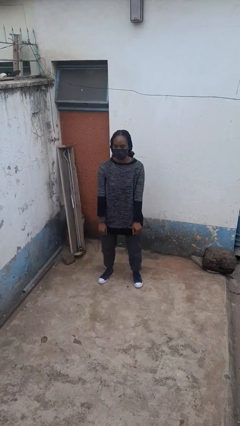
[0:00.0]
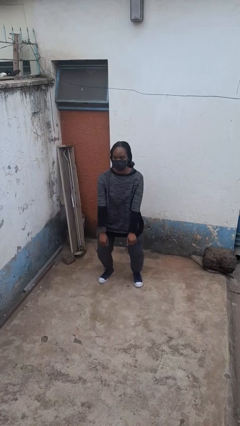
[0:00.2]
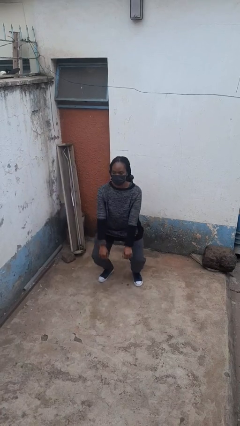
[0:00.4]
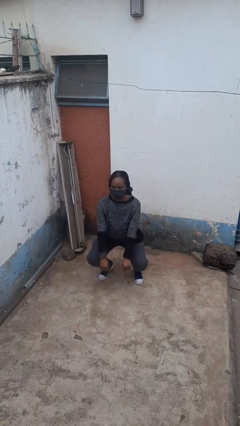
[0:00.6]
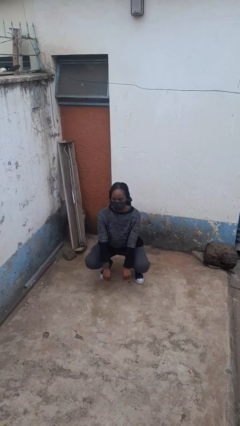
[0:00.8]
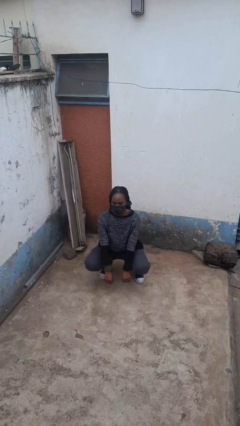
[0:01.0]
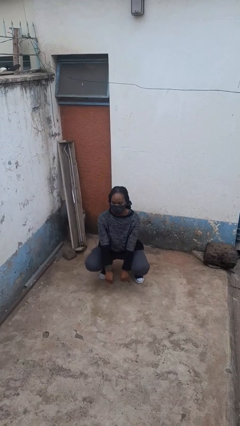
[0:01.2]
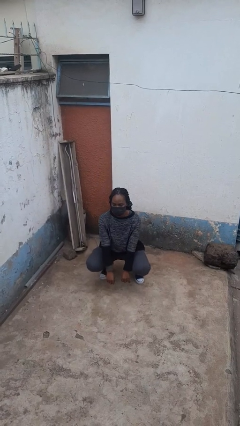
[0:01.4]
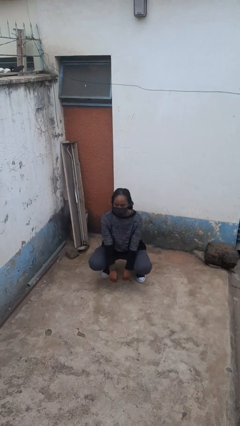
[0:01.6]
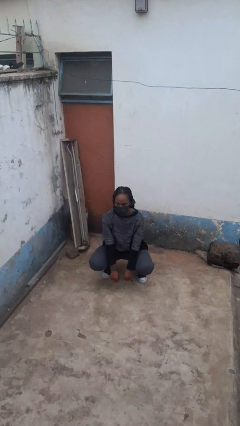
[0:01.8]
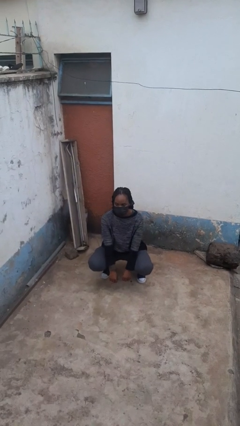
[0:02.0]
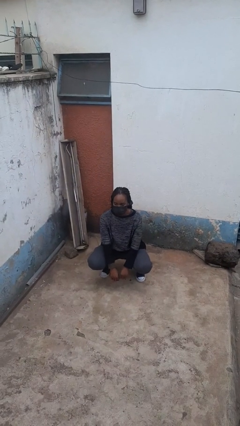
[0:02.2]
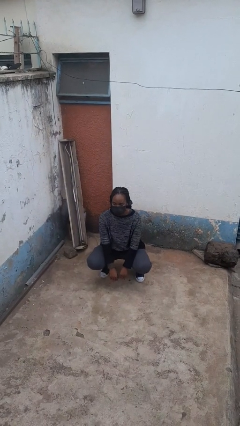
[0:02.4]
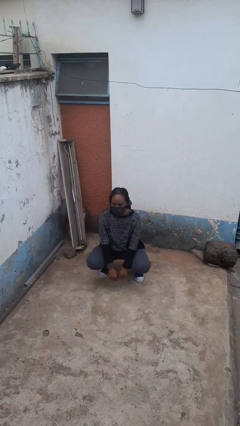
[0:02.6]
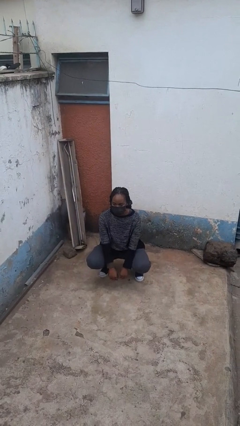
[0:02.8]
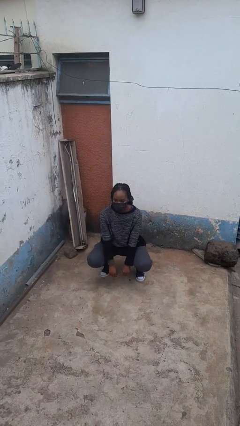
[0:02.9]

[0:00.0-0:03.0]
person squats

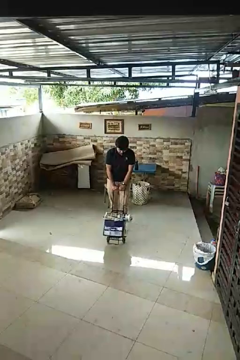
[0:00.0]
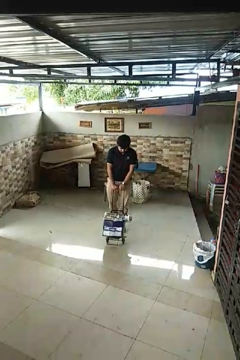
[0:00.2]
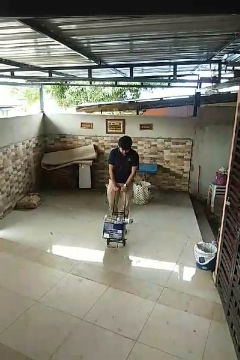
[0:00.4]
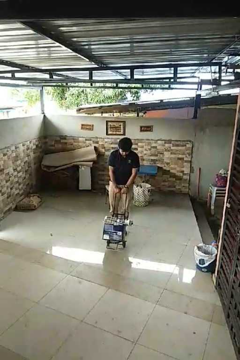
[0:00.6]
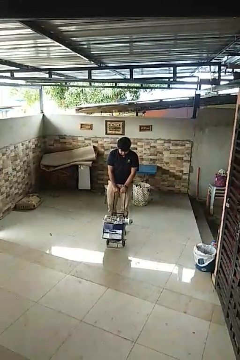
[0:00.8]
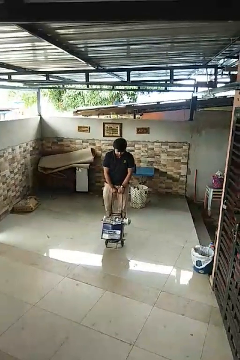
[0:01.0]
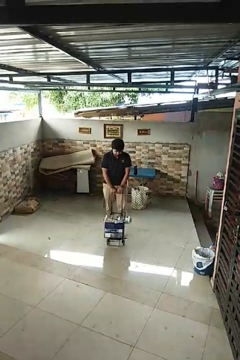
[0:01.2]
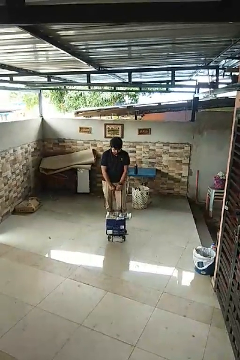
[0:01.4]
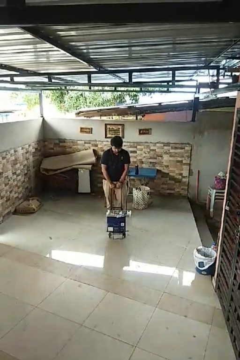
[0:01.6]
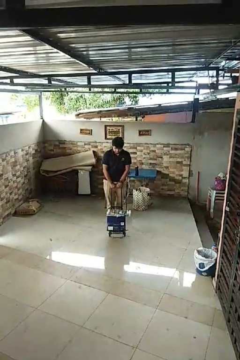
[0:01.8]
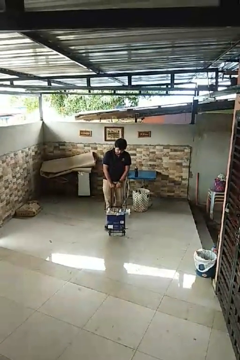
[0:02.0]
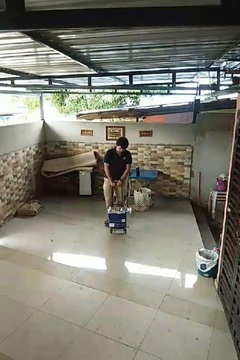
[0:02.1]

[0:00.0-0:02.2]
person pulls wheeled cart

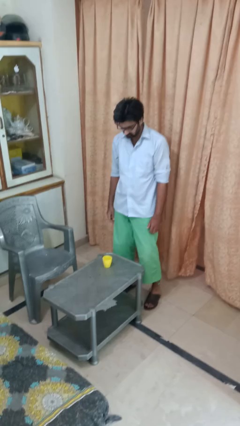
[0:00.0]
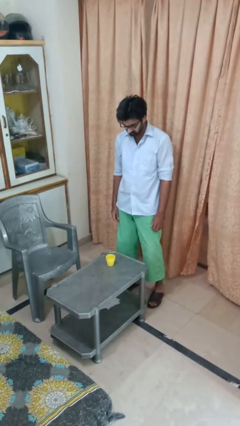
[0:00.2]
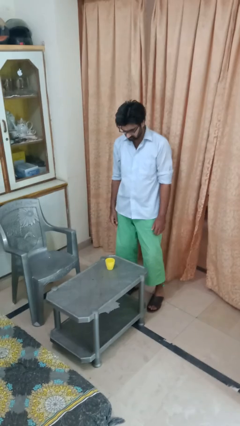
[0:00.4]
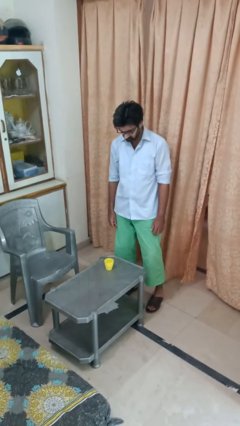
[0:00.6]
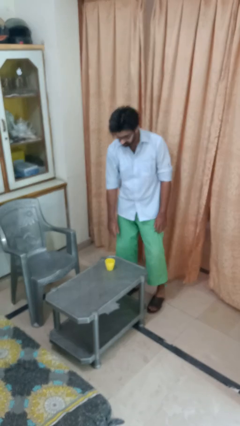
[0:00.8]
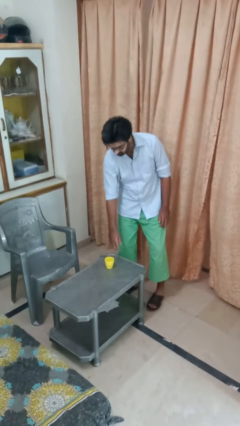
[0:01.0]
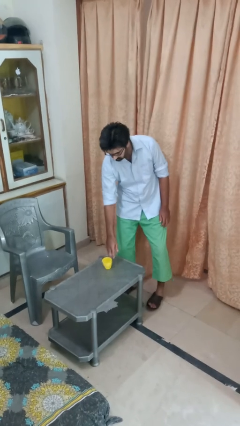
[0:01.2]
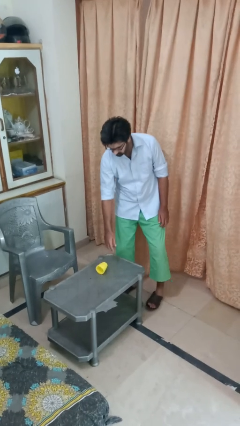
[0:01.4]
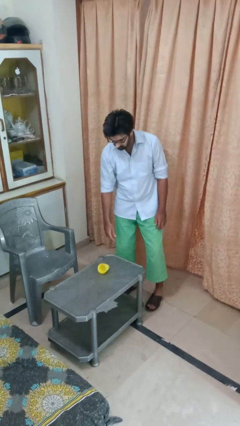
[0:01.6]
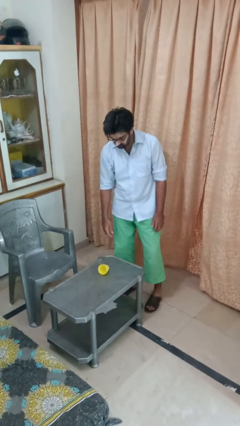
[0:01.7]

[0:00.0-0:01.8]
person knocks over glass

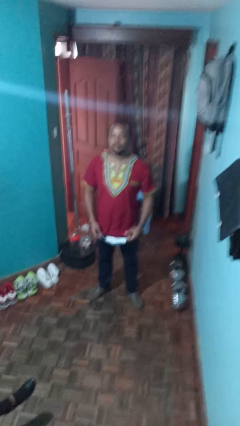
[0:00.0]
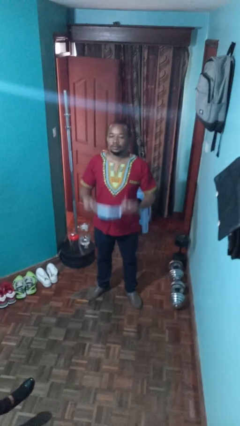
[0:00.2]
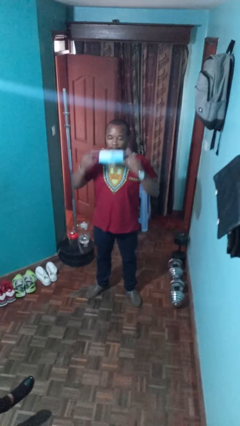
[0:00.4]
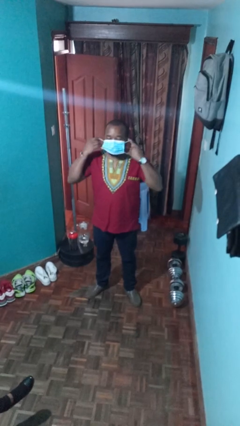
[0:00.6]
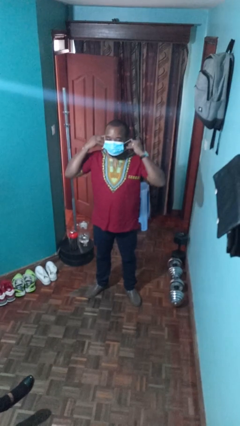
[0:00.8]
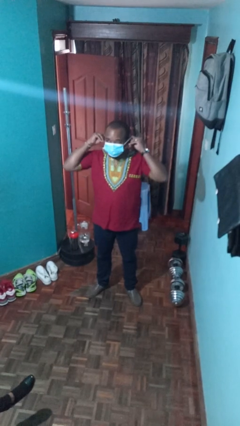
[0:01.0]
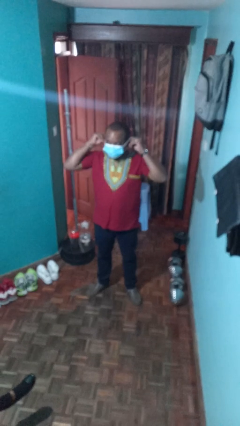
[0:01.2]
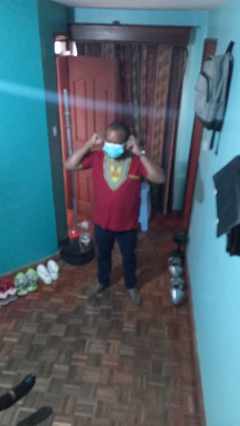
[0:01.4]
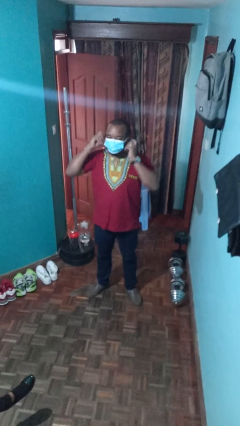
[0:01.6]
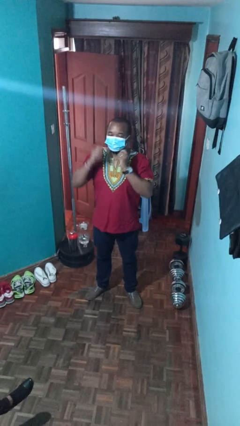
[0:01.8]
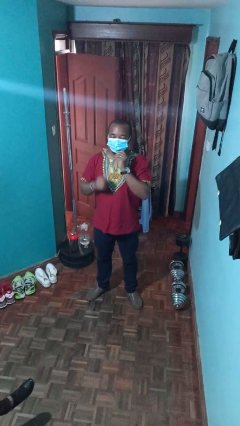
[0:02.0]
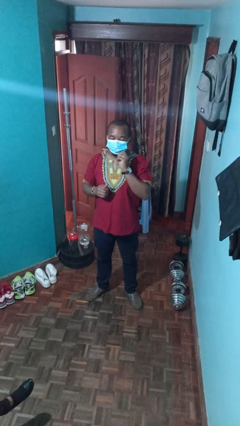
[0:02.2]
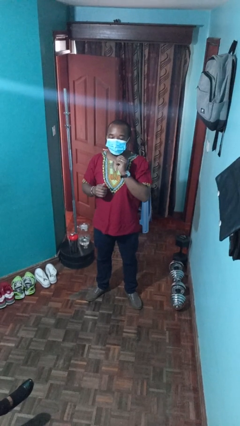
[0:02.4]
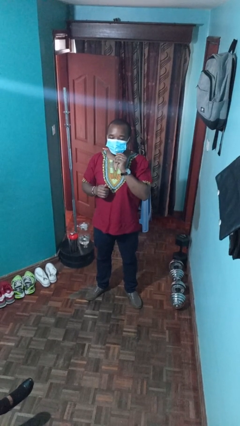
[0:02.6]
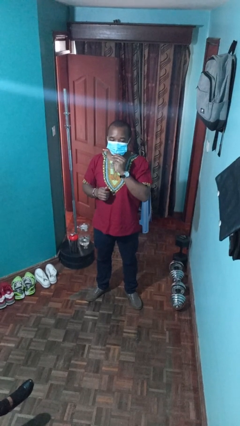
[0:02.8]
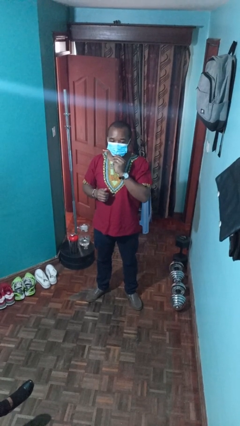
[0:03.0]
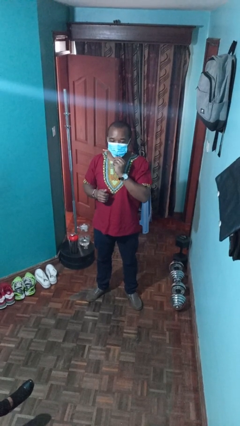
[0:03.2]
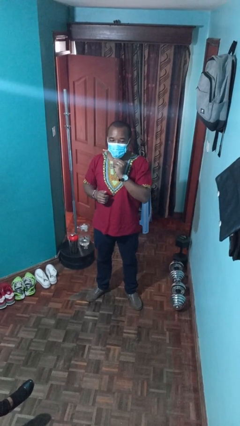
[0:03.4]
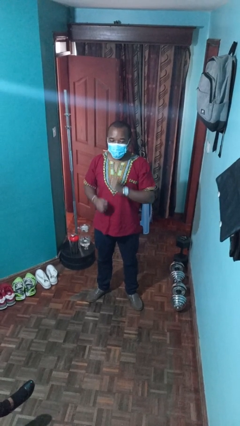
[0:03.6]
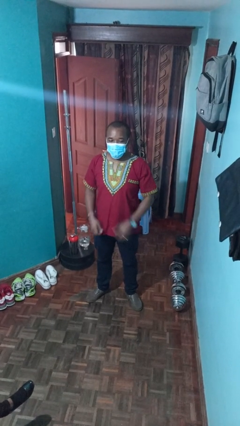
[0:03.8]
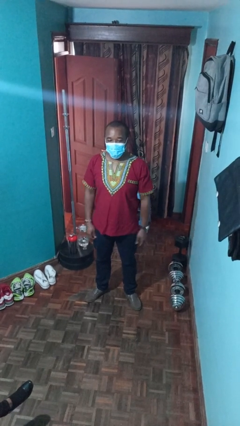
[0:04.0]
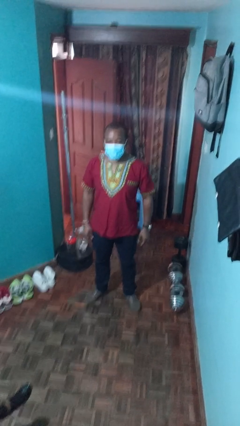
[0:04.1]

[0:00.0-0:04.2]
person puts on facemask

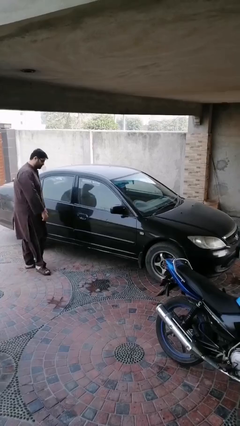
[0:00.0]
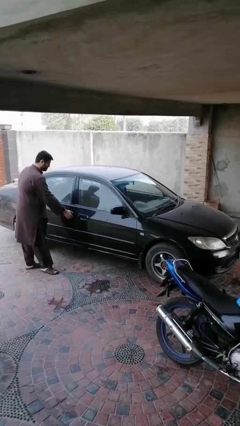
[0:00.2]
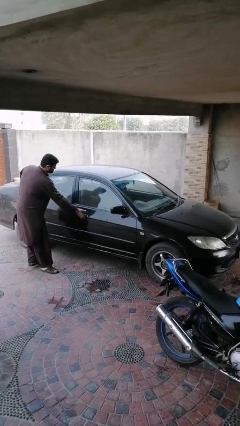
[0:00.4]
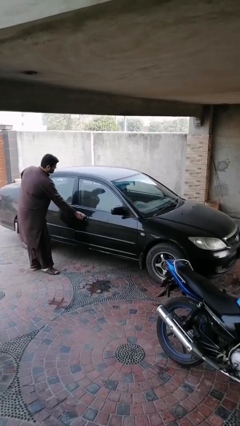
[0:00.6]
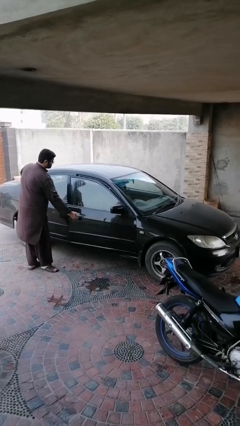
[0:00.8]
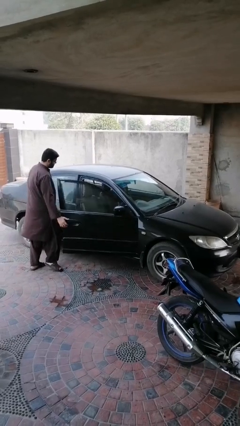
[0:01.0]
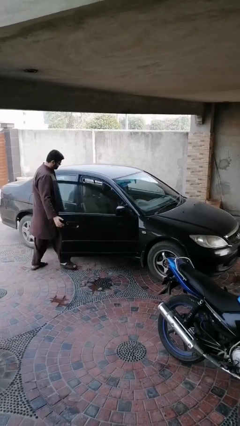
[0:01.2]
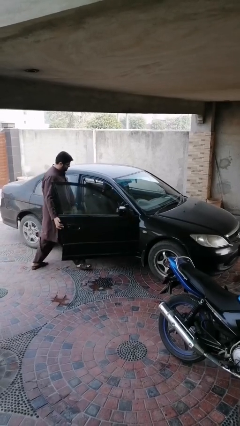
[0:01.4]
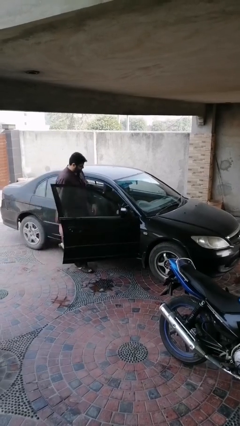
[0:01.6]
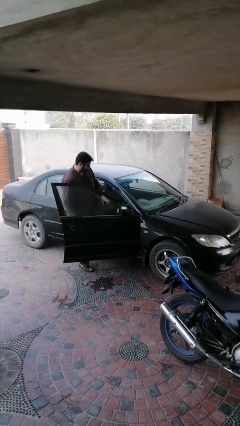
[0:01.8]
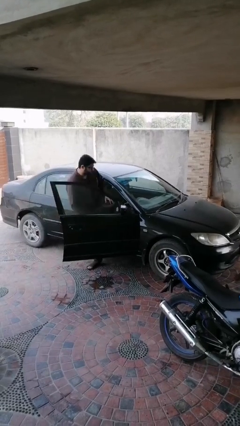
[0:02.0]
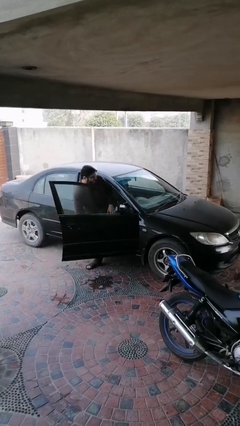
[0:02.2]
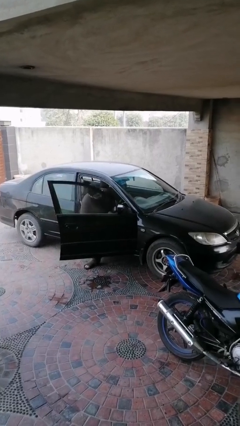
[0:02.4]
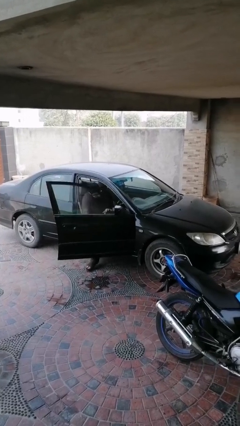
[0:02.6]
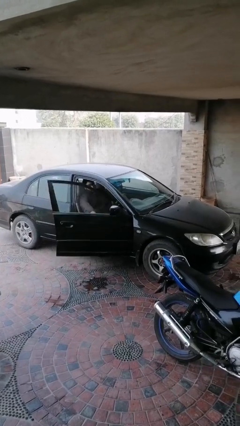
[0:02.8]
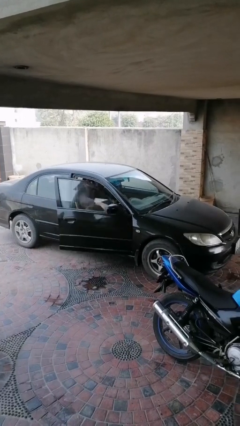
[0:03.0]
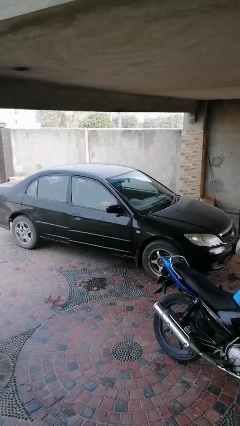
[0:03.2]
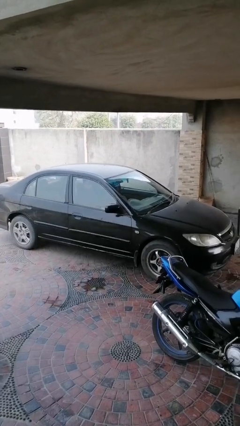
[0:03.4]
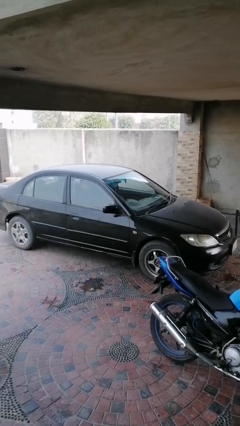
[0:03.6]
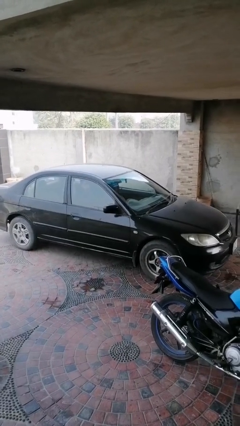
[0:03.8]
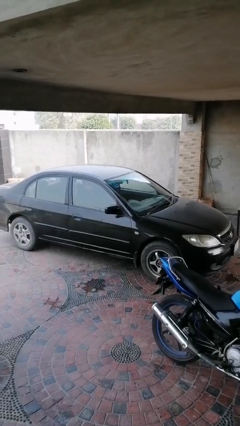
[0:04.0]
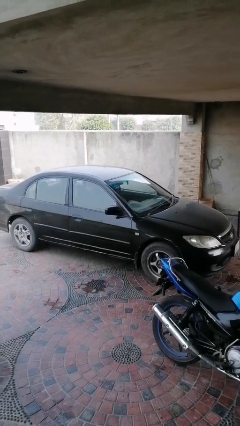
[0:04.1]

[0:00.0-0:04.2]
car picks up person

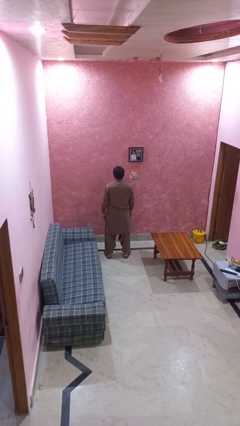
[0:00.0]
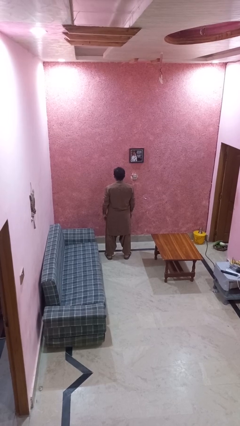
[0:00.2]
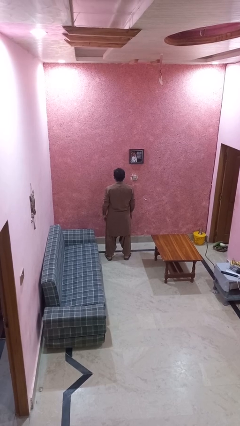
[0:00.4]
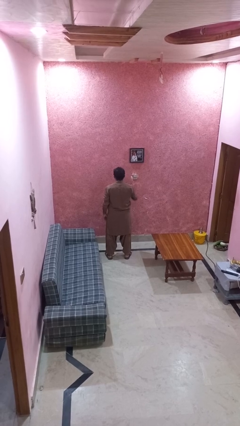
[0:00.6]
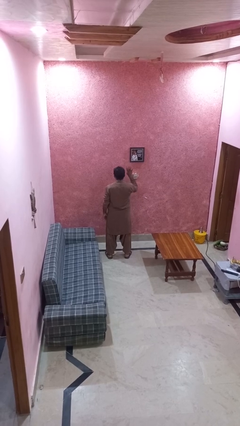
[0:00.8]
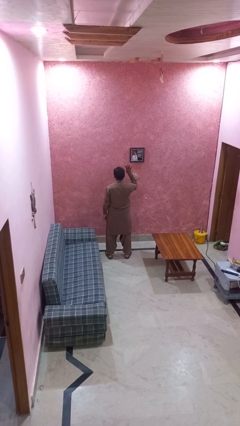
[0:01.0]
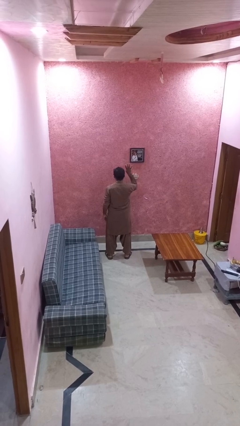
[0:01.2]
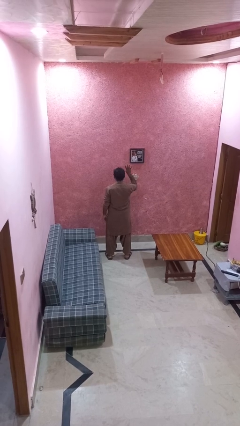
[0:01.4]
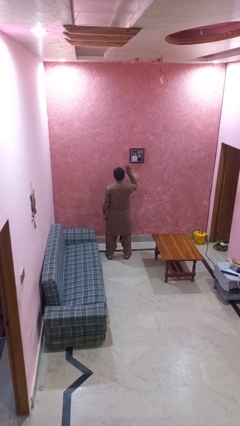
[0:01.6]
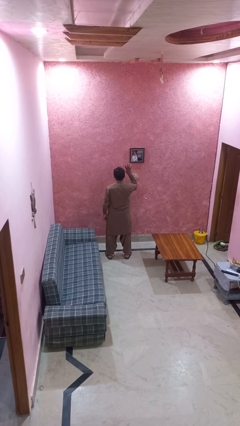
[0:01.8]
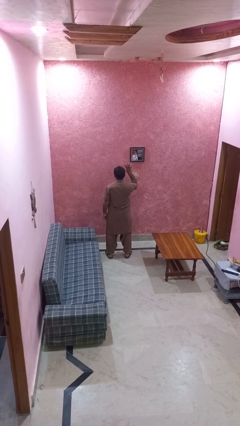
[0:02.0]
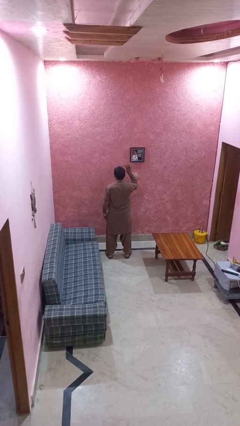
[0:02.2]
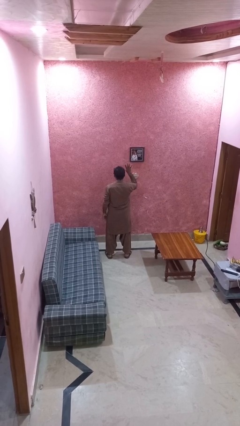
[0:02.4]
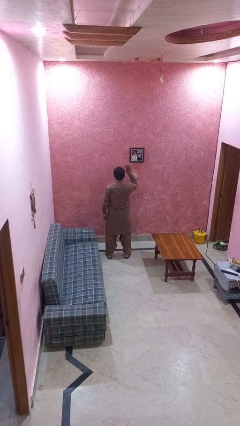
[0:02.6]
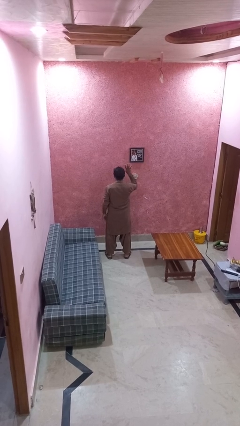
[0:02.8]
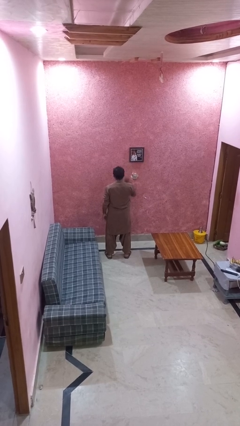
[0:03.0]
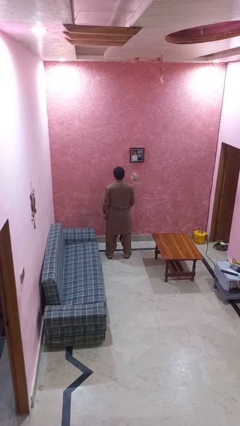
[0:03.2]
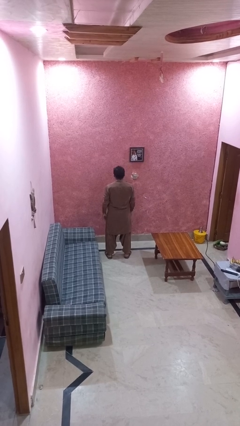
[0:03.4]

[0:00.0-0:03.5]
person gestures number four
